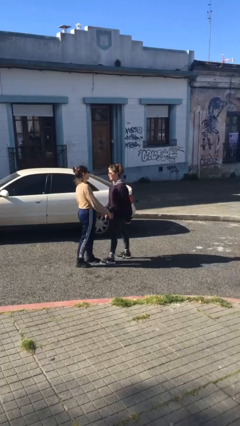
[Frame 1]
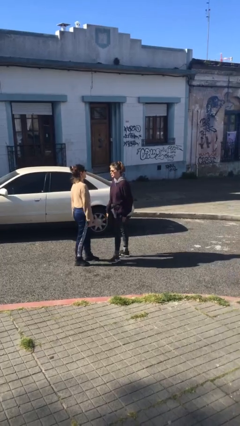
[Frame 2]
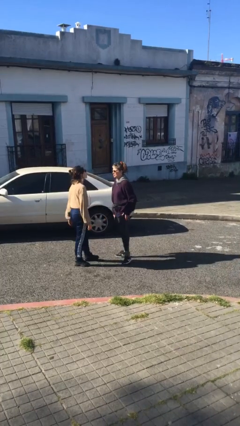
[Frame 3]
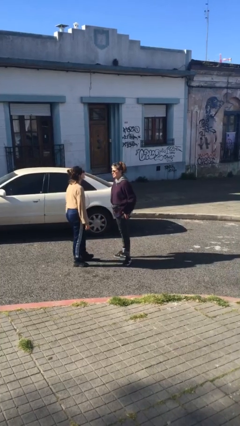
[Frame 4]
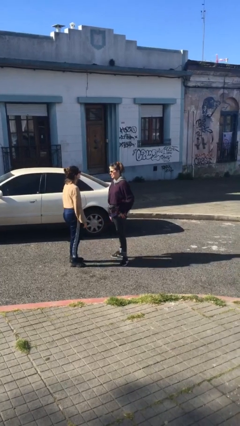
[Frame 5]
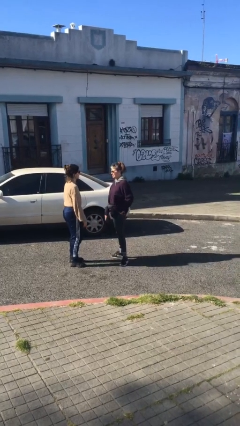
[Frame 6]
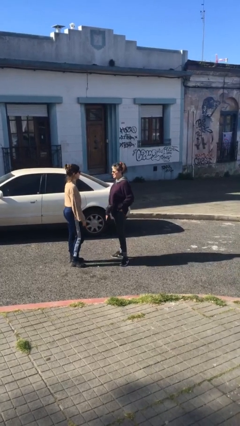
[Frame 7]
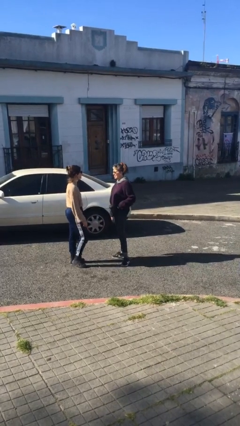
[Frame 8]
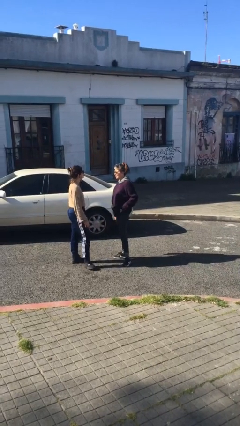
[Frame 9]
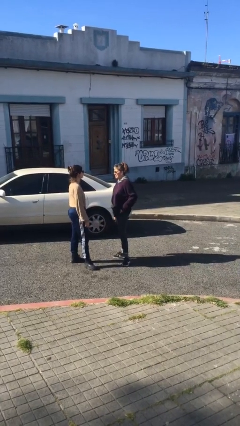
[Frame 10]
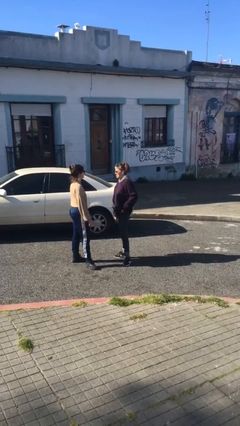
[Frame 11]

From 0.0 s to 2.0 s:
person talks to person

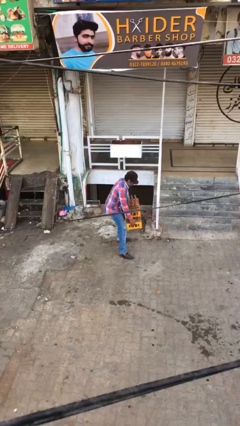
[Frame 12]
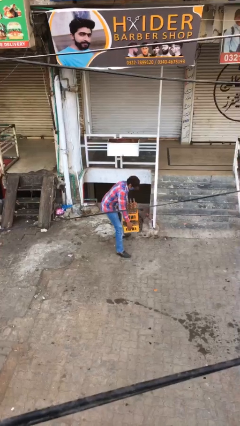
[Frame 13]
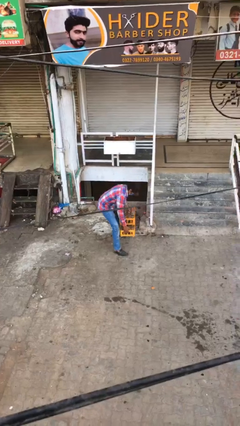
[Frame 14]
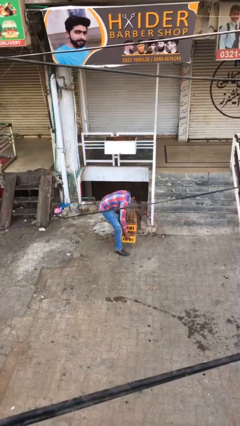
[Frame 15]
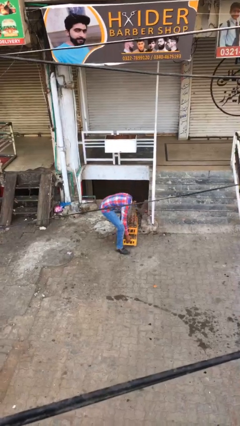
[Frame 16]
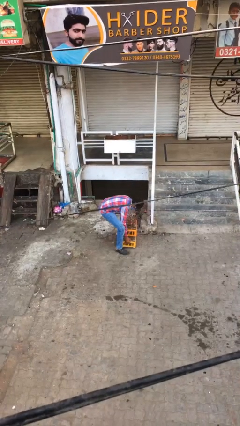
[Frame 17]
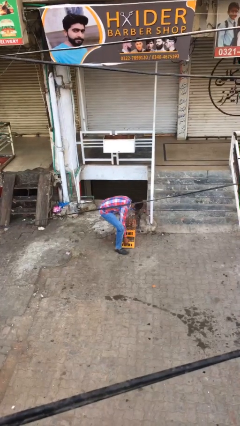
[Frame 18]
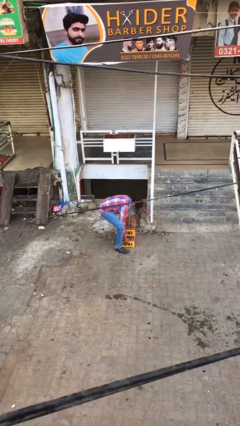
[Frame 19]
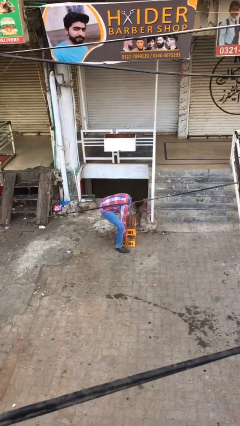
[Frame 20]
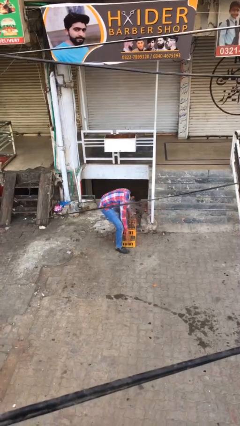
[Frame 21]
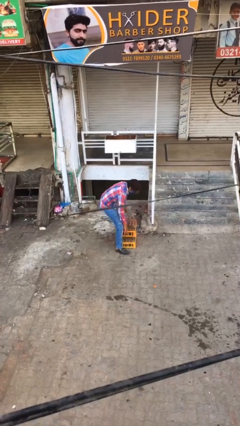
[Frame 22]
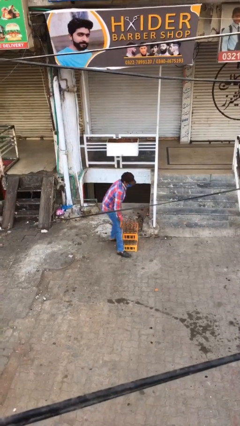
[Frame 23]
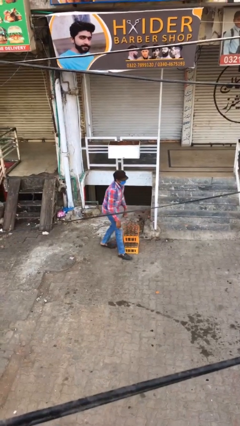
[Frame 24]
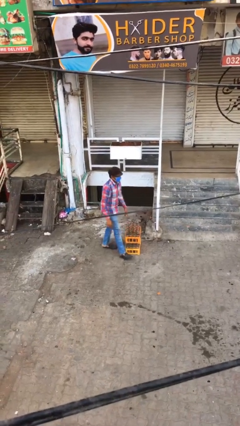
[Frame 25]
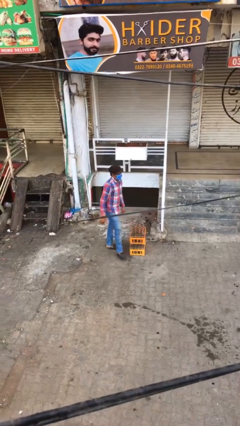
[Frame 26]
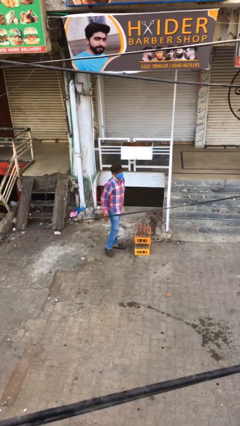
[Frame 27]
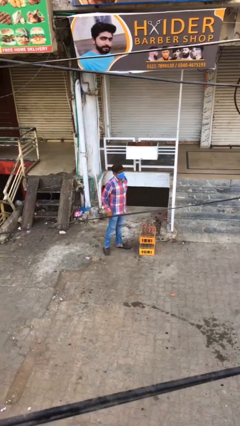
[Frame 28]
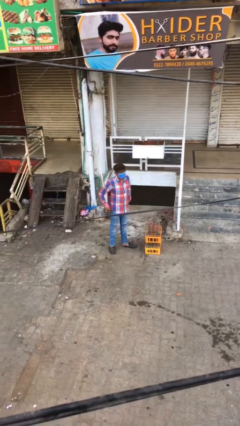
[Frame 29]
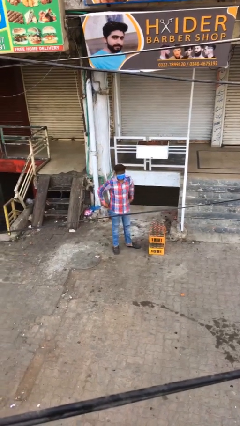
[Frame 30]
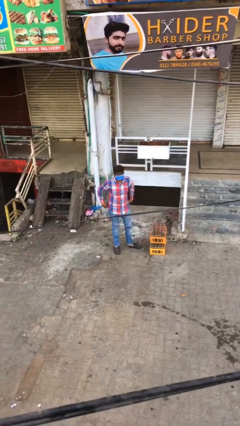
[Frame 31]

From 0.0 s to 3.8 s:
person puts down object on floor

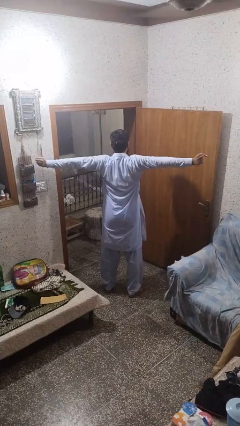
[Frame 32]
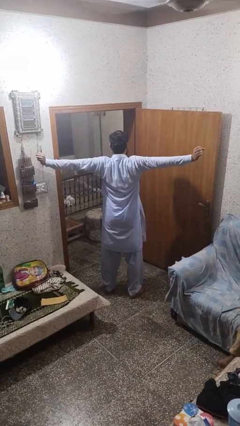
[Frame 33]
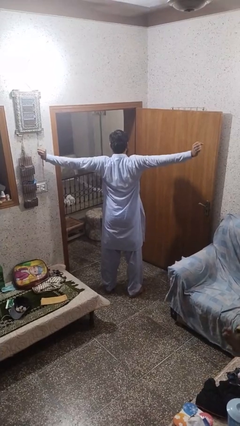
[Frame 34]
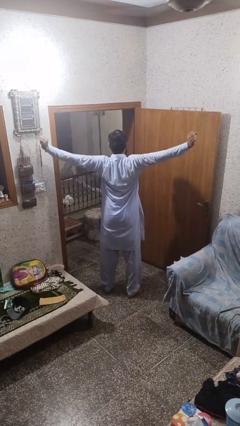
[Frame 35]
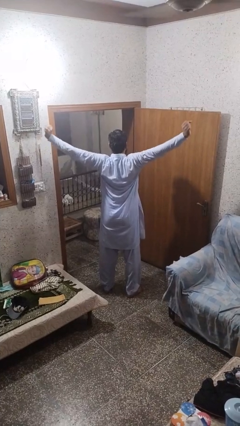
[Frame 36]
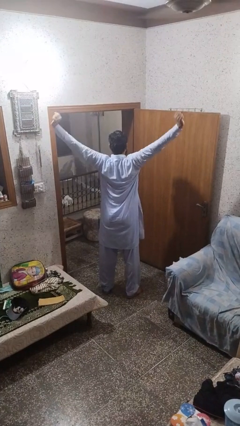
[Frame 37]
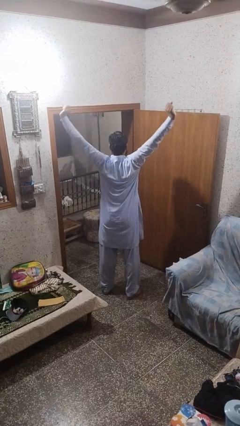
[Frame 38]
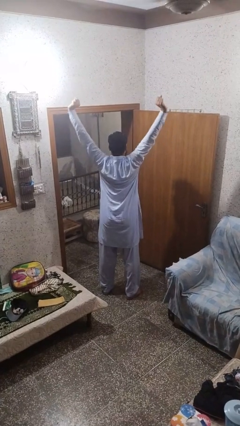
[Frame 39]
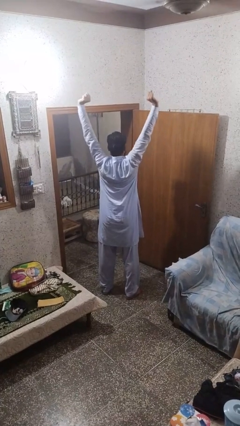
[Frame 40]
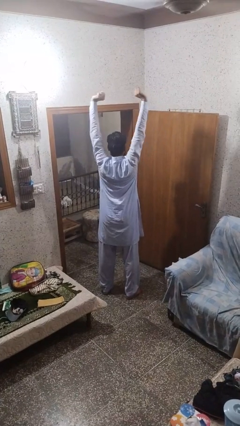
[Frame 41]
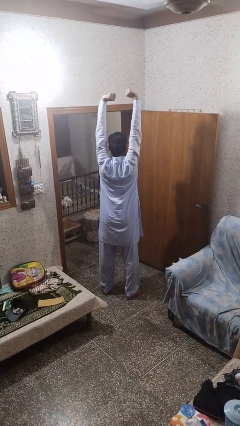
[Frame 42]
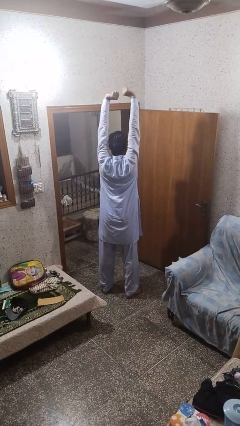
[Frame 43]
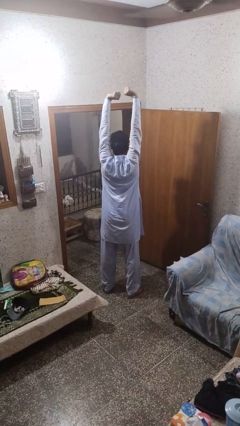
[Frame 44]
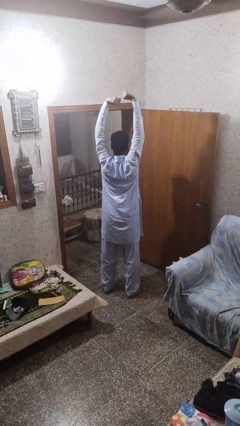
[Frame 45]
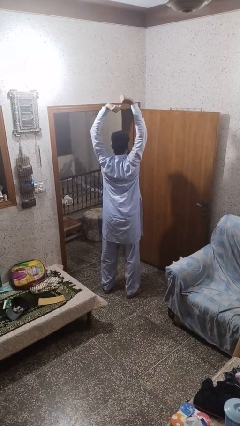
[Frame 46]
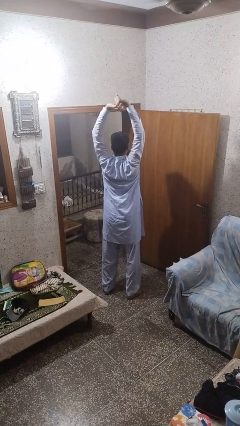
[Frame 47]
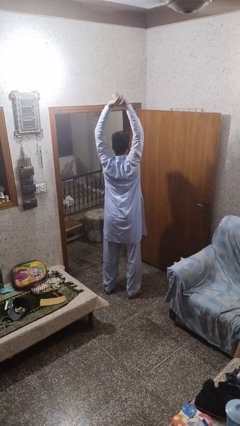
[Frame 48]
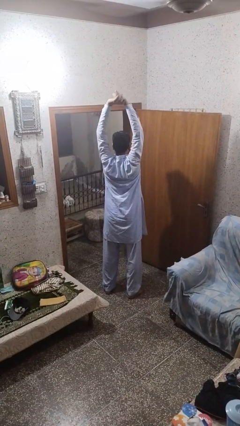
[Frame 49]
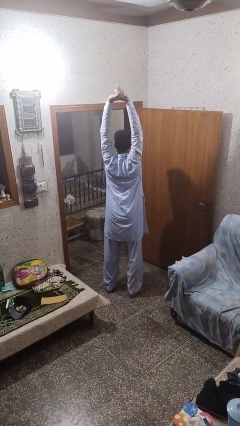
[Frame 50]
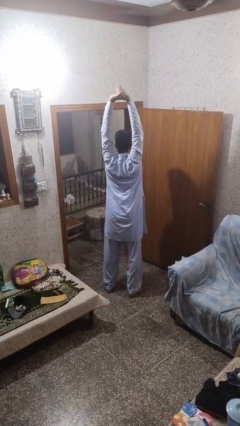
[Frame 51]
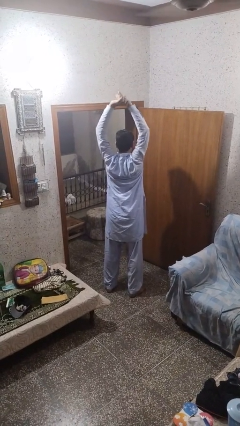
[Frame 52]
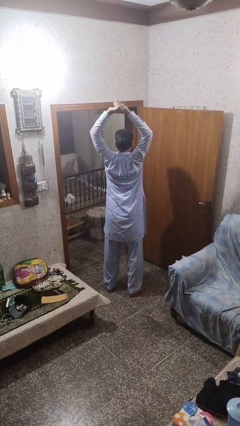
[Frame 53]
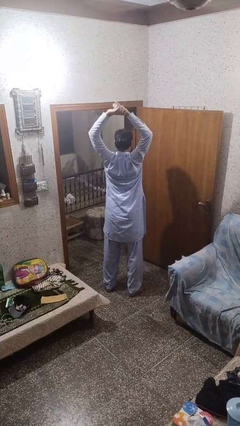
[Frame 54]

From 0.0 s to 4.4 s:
person stretches arms over head

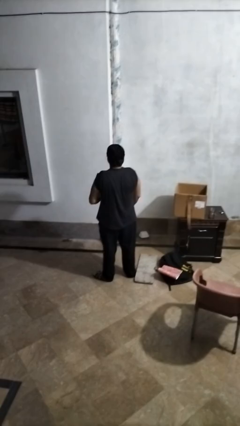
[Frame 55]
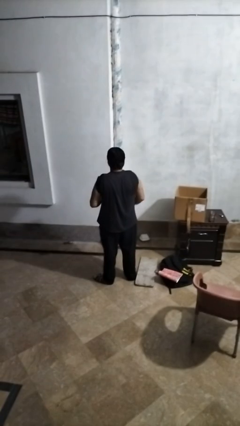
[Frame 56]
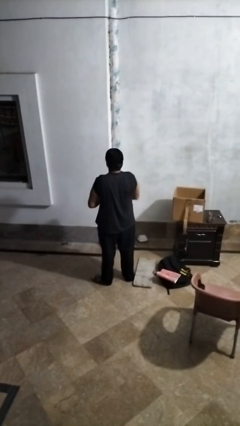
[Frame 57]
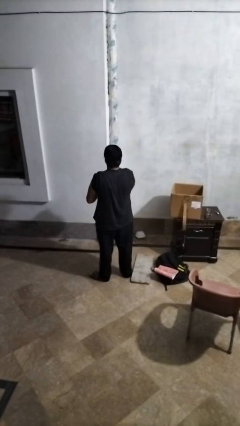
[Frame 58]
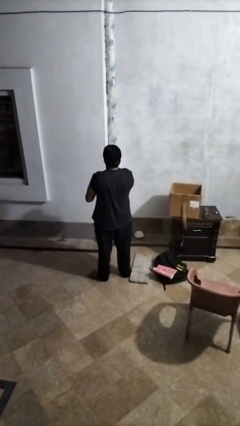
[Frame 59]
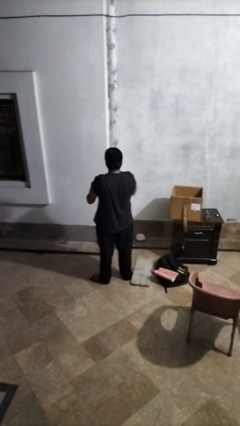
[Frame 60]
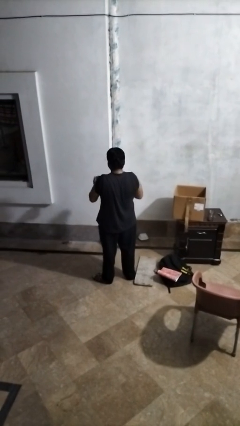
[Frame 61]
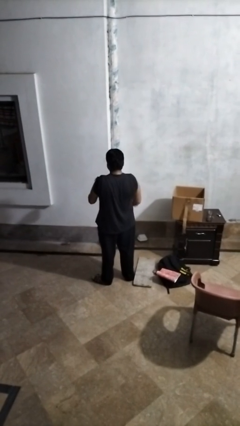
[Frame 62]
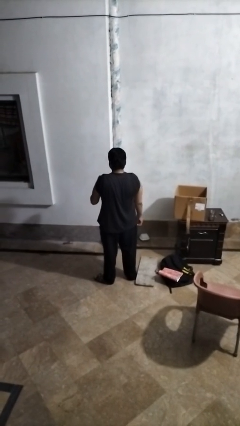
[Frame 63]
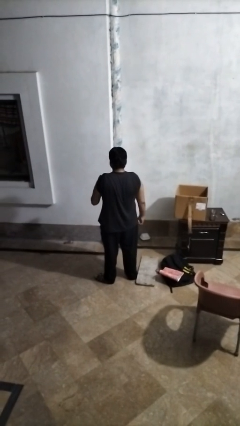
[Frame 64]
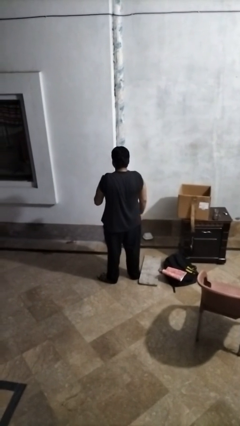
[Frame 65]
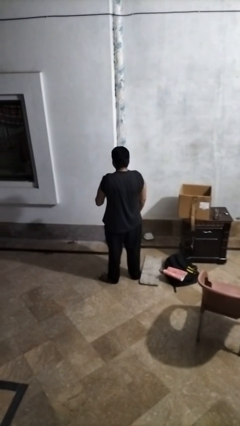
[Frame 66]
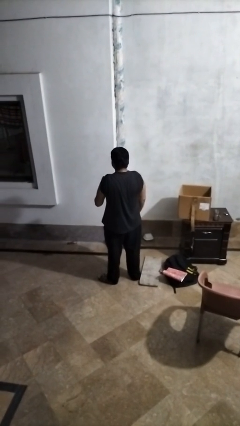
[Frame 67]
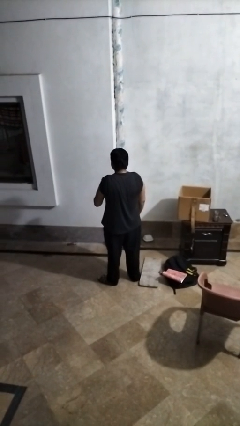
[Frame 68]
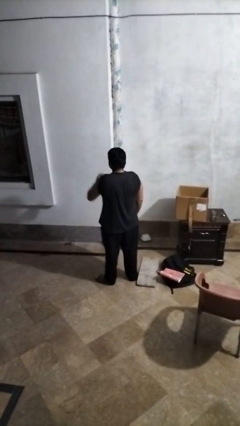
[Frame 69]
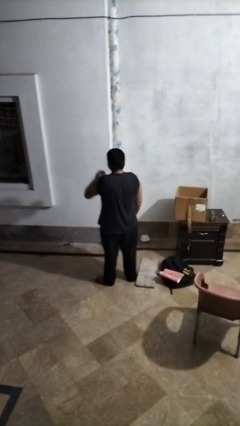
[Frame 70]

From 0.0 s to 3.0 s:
person opens beverage can

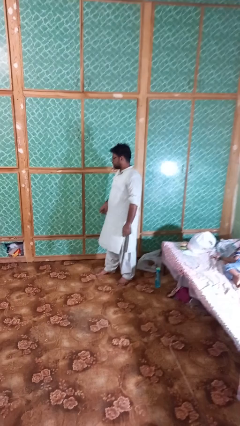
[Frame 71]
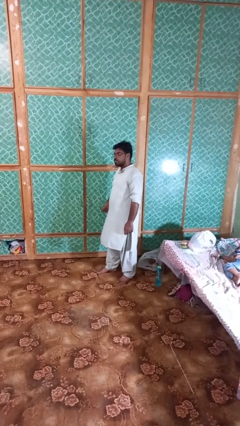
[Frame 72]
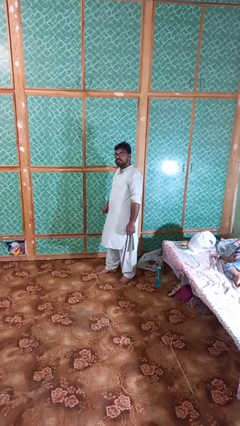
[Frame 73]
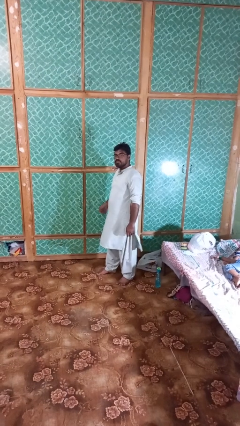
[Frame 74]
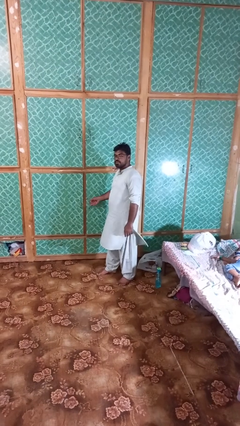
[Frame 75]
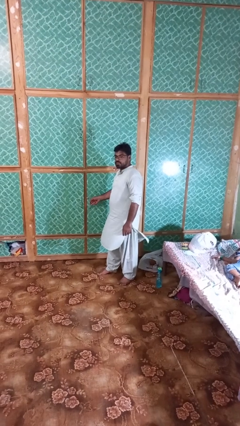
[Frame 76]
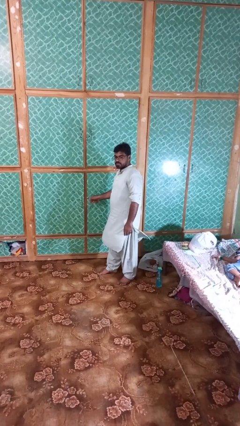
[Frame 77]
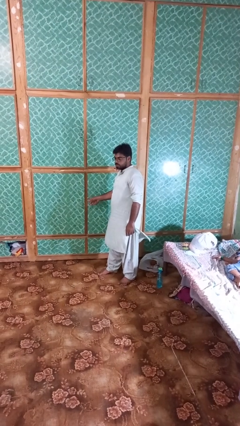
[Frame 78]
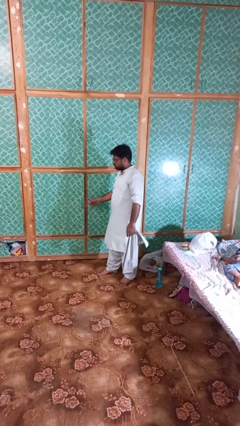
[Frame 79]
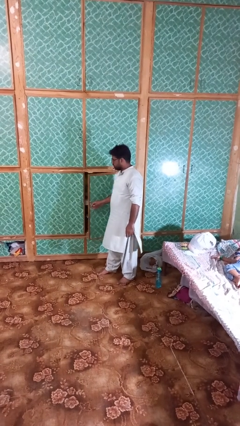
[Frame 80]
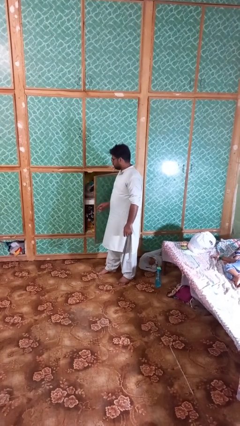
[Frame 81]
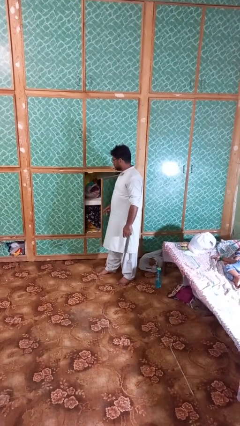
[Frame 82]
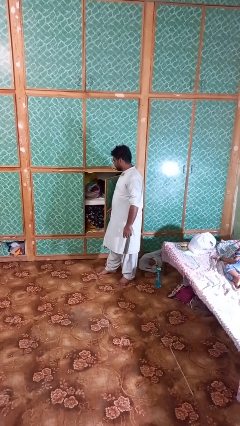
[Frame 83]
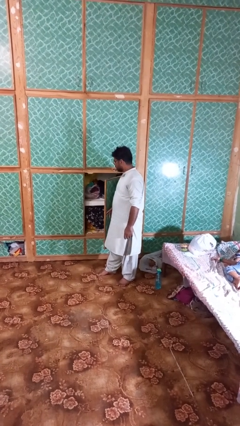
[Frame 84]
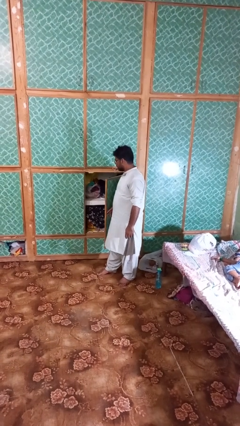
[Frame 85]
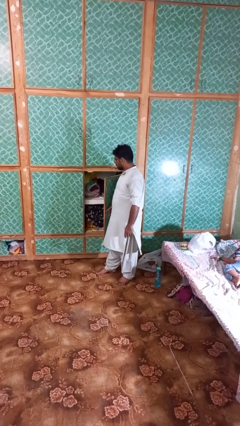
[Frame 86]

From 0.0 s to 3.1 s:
person opens closet door

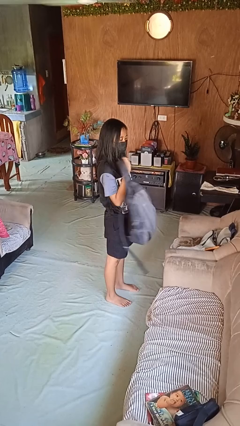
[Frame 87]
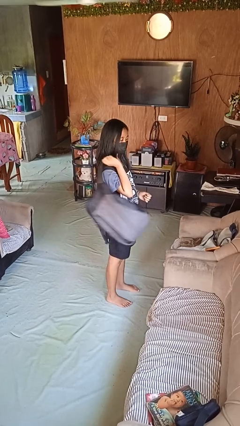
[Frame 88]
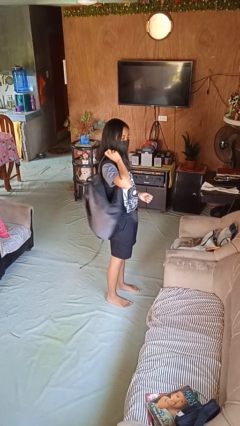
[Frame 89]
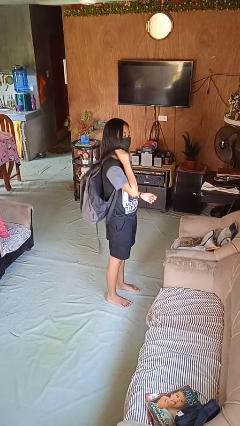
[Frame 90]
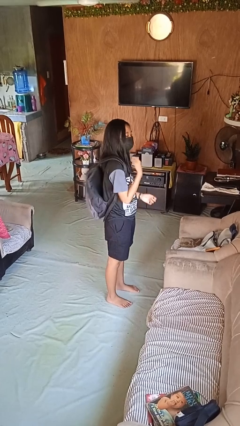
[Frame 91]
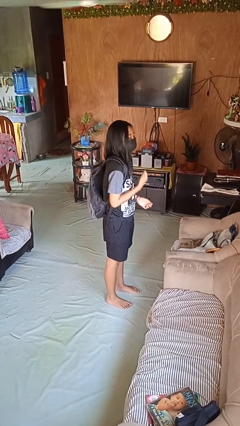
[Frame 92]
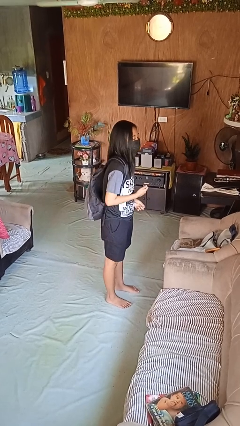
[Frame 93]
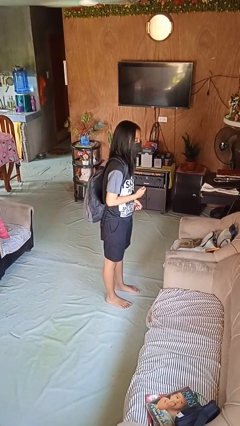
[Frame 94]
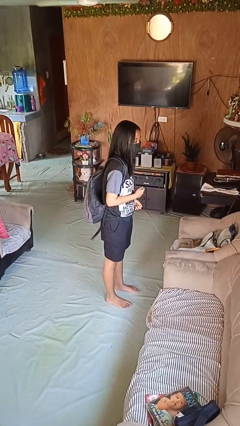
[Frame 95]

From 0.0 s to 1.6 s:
person puts on backpack
